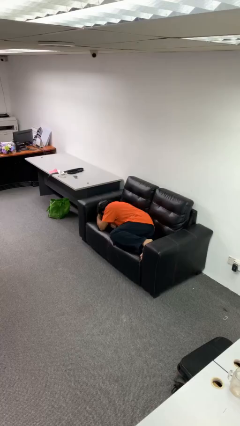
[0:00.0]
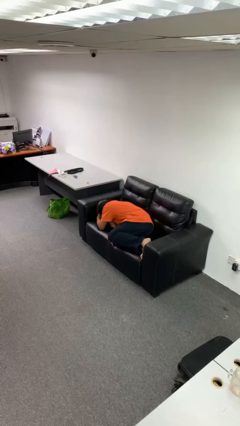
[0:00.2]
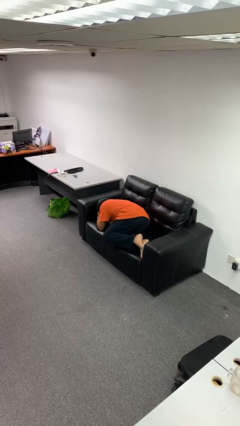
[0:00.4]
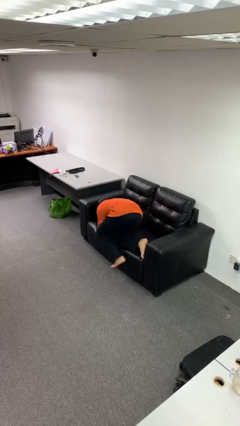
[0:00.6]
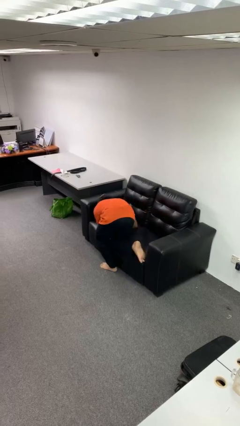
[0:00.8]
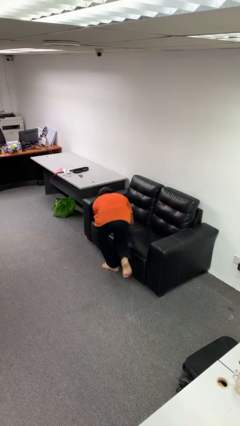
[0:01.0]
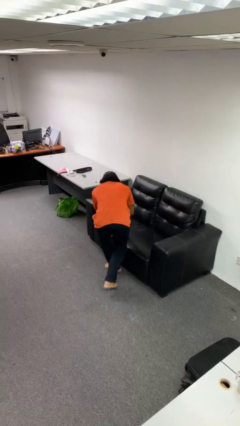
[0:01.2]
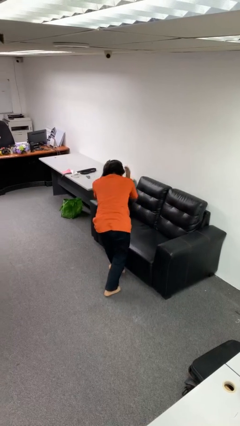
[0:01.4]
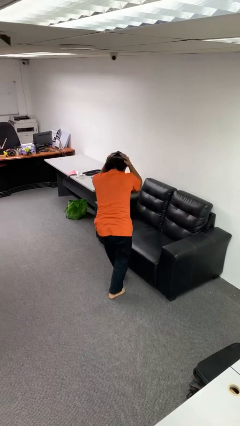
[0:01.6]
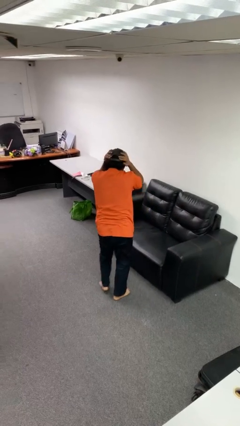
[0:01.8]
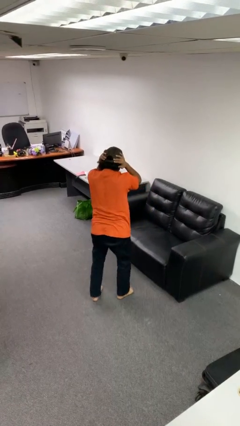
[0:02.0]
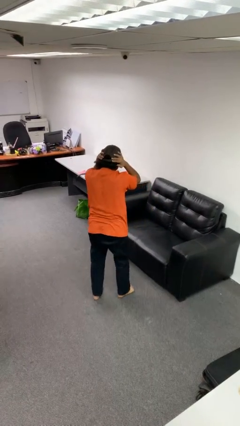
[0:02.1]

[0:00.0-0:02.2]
person stands up

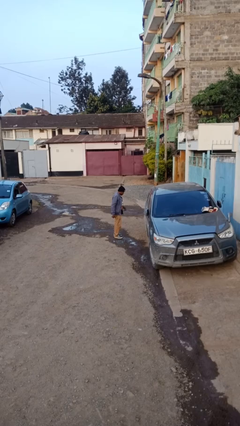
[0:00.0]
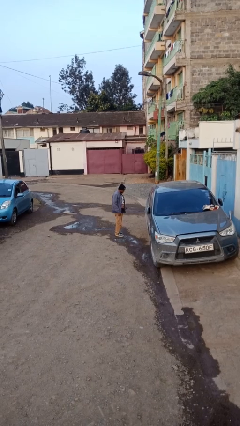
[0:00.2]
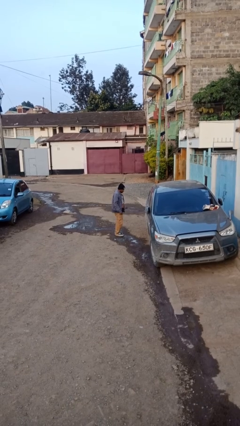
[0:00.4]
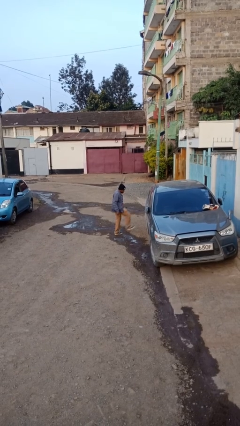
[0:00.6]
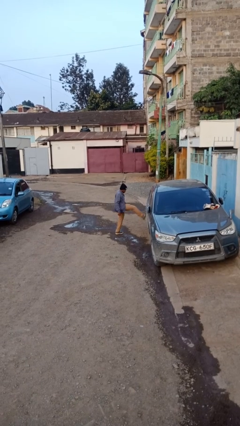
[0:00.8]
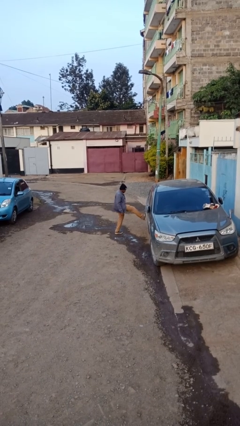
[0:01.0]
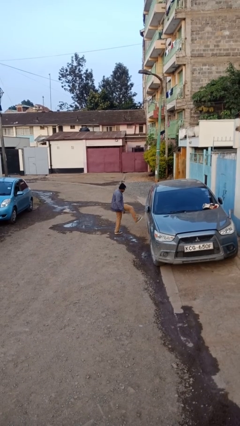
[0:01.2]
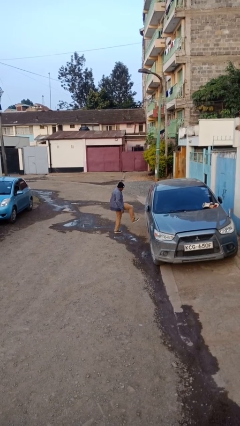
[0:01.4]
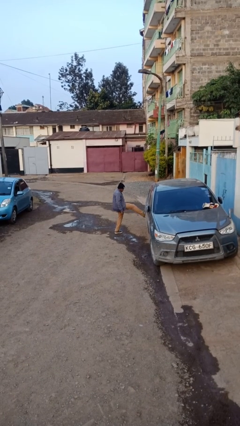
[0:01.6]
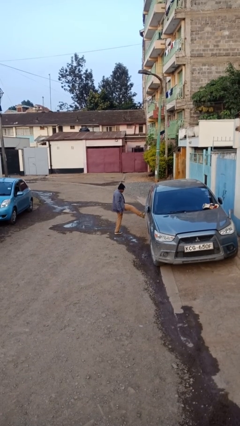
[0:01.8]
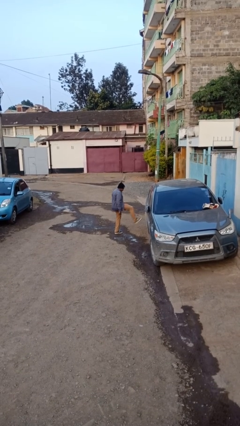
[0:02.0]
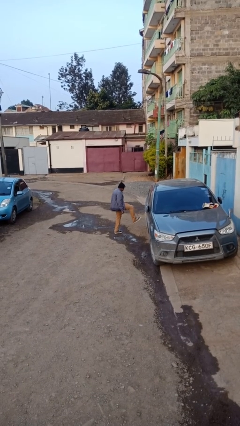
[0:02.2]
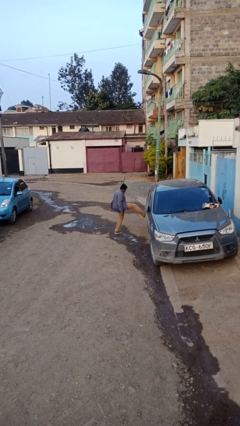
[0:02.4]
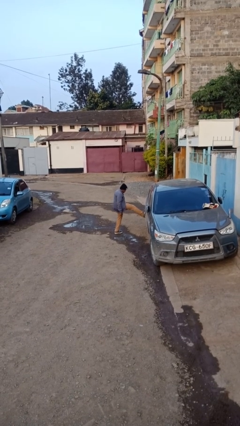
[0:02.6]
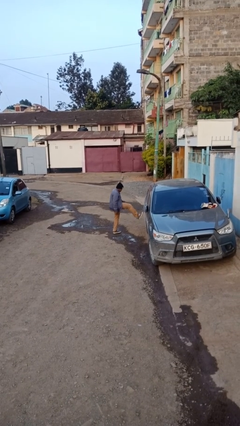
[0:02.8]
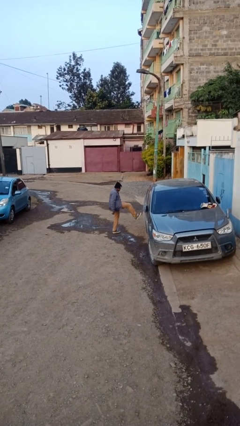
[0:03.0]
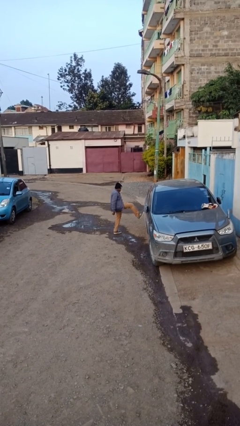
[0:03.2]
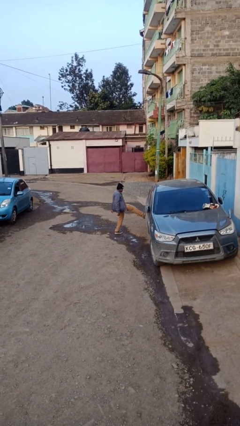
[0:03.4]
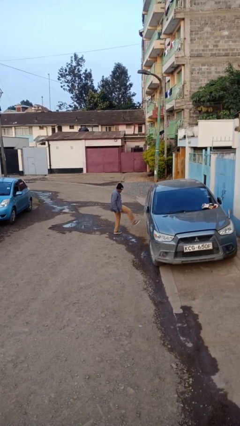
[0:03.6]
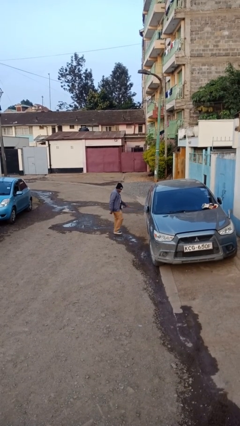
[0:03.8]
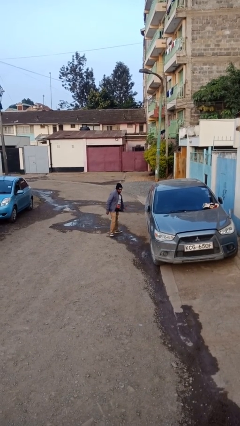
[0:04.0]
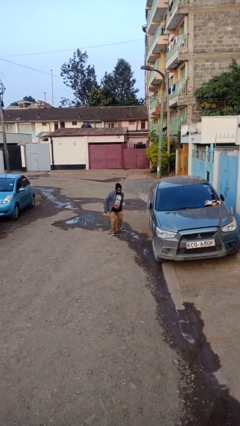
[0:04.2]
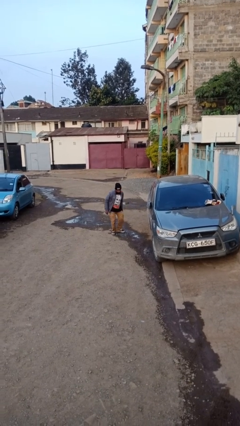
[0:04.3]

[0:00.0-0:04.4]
person kicks car tires

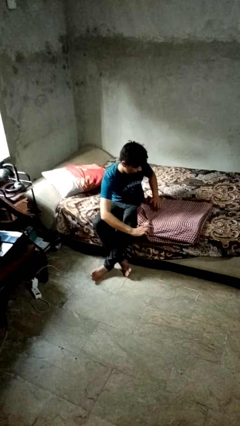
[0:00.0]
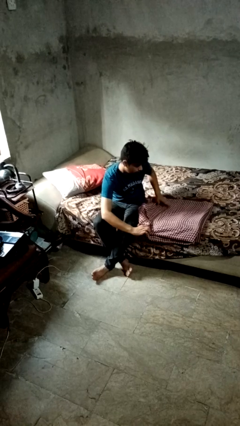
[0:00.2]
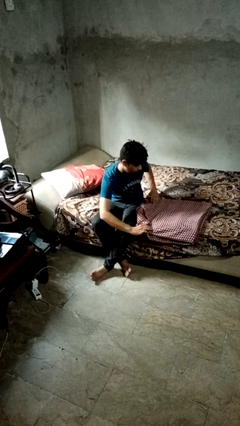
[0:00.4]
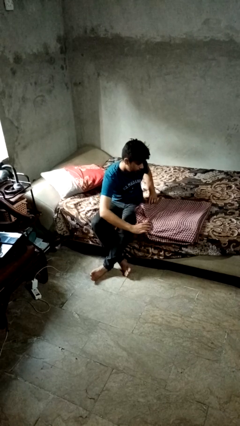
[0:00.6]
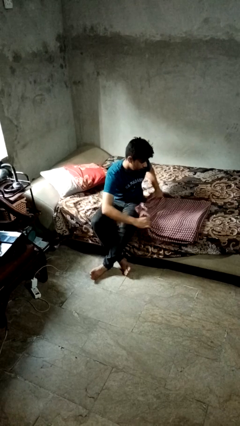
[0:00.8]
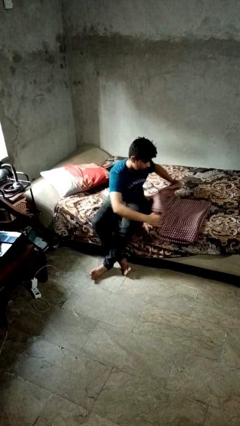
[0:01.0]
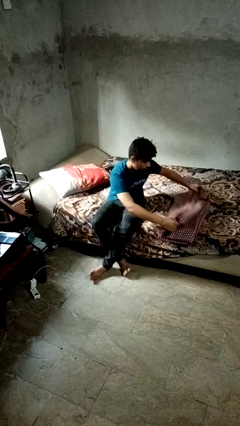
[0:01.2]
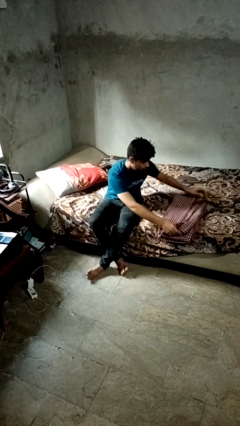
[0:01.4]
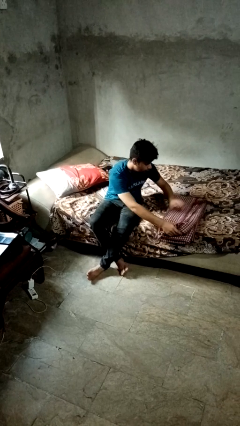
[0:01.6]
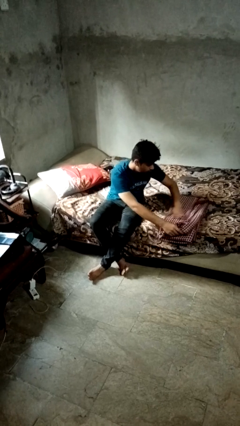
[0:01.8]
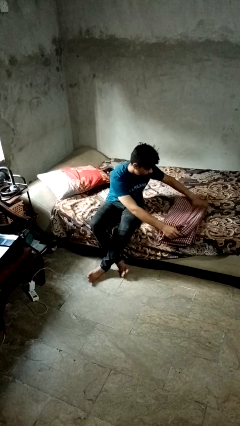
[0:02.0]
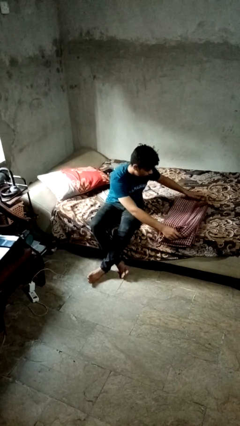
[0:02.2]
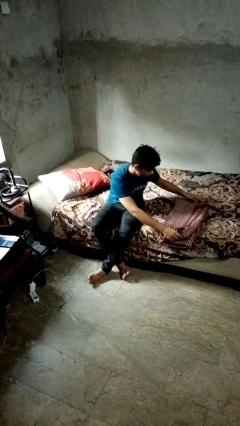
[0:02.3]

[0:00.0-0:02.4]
person folds blanket

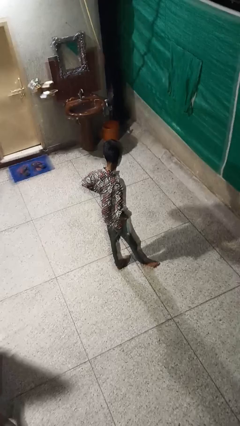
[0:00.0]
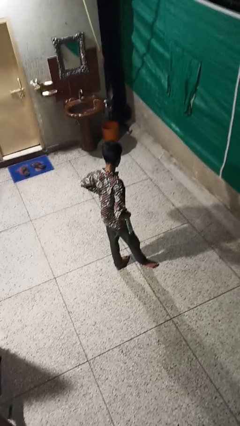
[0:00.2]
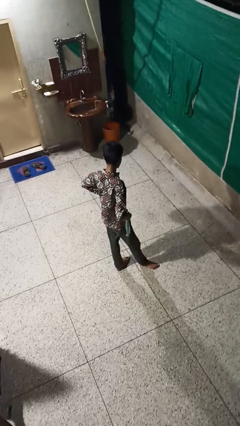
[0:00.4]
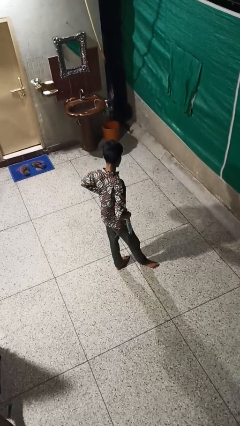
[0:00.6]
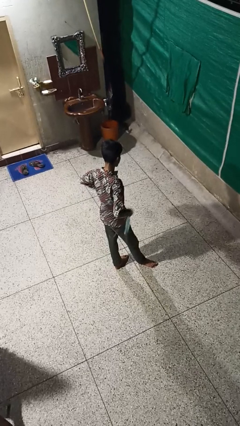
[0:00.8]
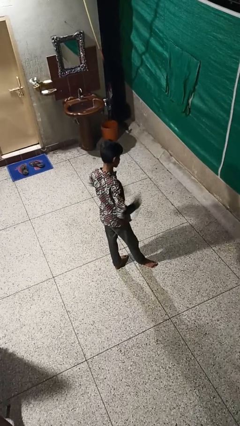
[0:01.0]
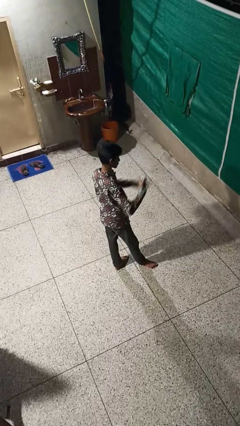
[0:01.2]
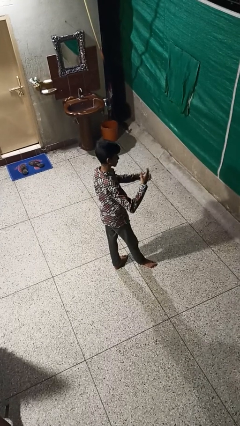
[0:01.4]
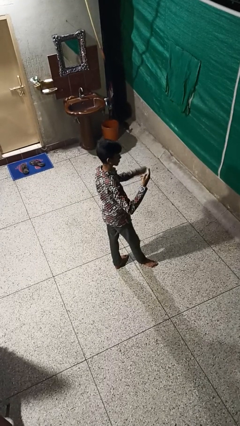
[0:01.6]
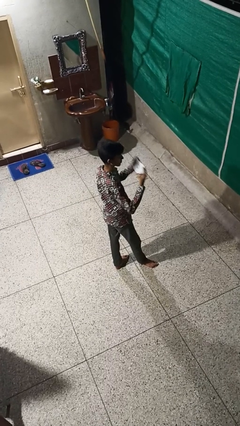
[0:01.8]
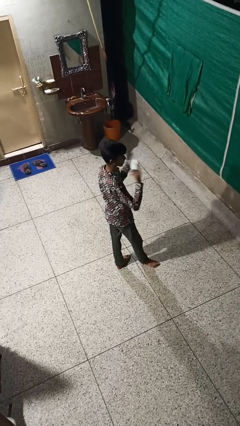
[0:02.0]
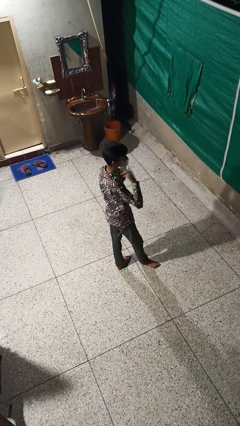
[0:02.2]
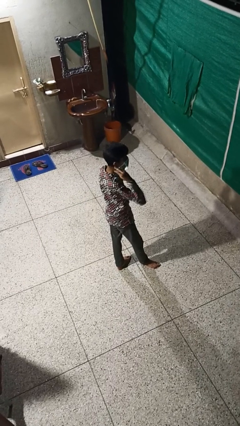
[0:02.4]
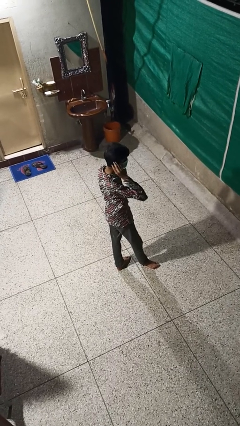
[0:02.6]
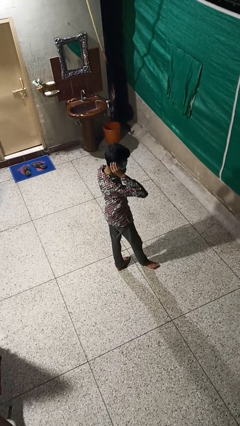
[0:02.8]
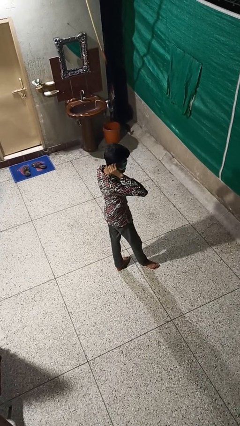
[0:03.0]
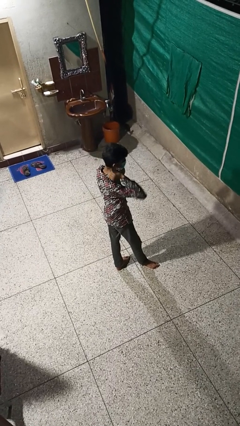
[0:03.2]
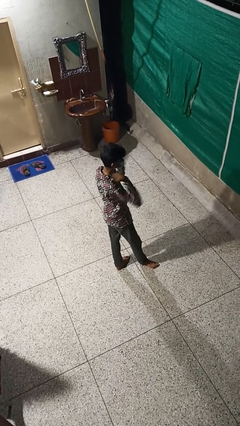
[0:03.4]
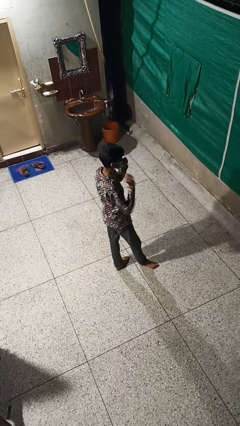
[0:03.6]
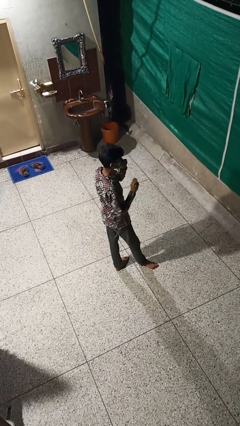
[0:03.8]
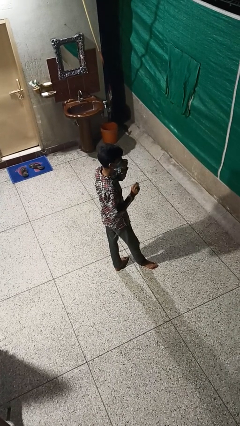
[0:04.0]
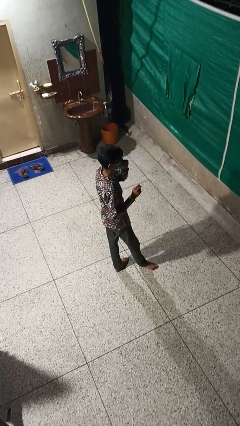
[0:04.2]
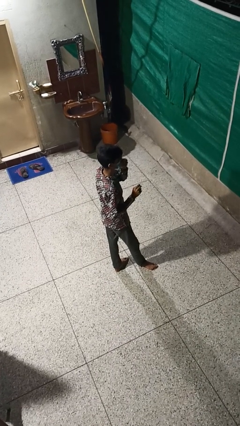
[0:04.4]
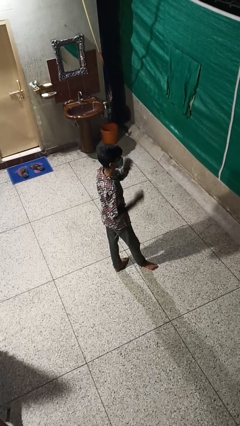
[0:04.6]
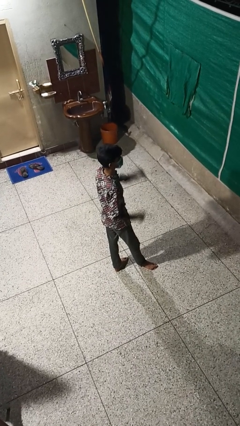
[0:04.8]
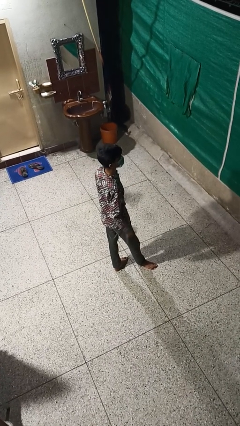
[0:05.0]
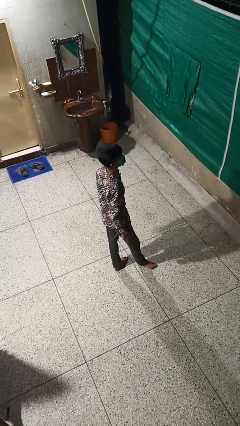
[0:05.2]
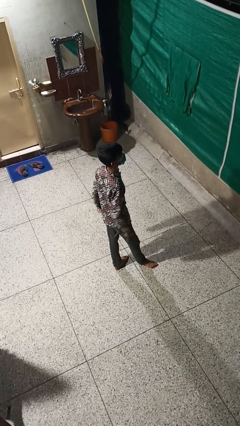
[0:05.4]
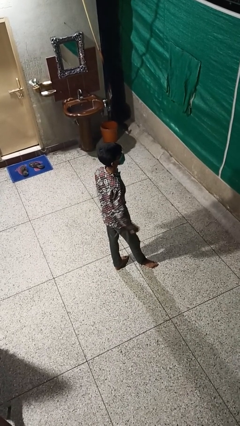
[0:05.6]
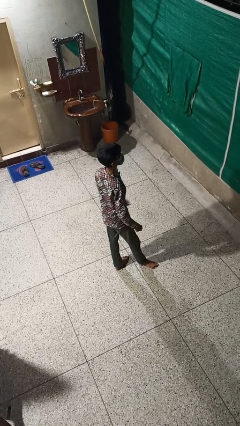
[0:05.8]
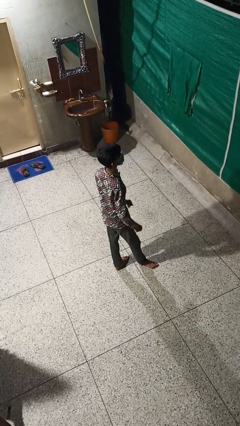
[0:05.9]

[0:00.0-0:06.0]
person puts on facemask

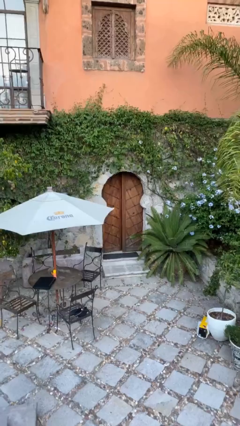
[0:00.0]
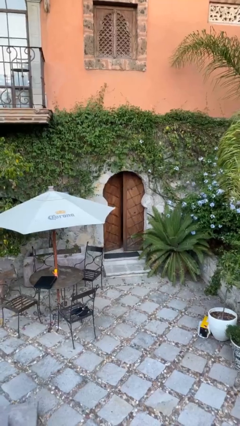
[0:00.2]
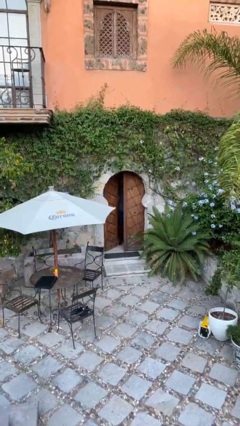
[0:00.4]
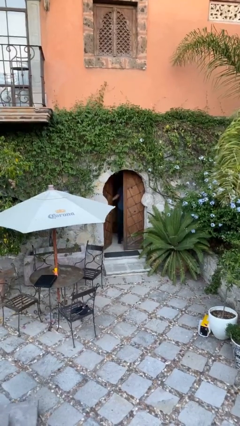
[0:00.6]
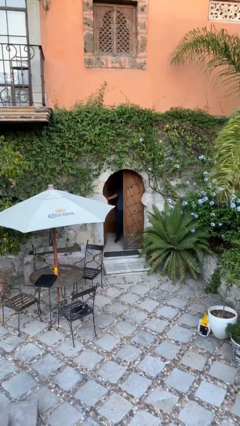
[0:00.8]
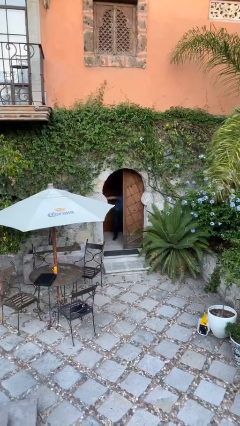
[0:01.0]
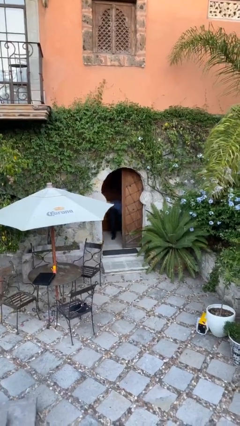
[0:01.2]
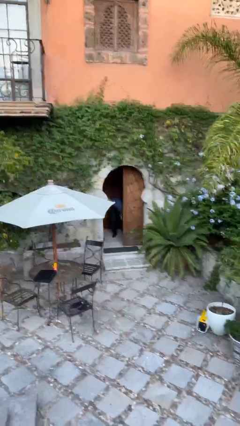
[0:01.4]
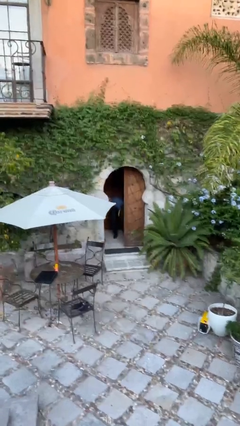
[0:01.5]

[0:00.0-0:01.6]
person opens facility door

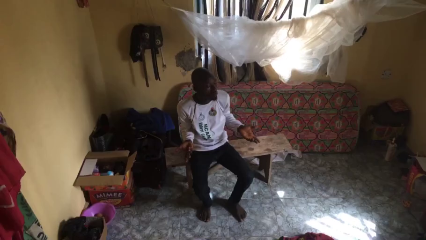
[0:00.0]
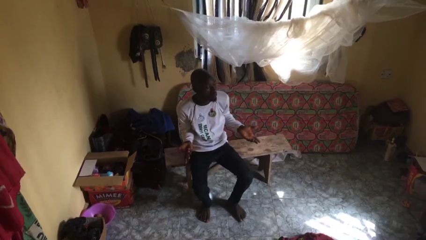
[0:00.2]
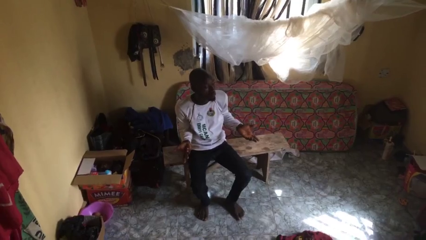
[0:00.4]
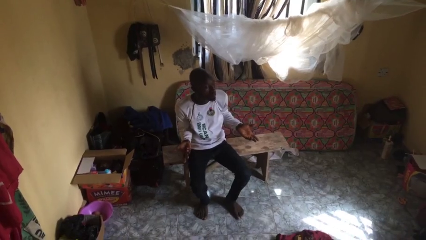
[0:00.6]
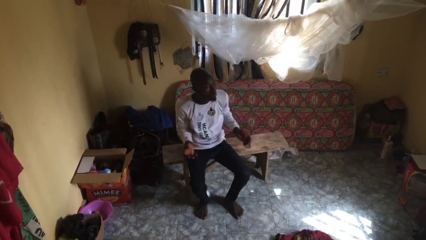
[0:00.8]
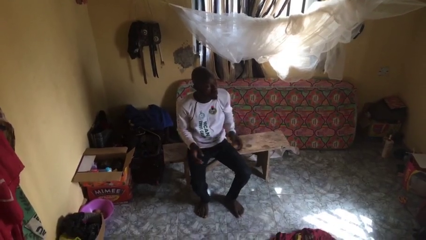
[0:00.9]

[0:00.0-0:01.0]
person shrugs
